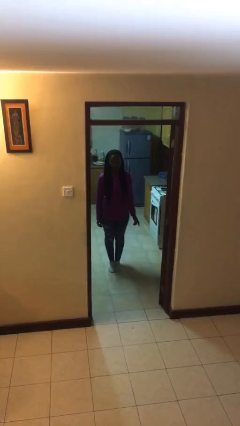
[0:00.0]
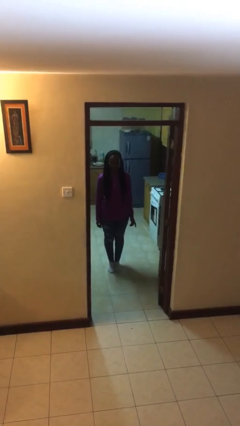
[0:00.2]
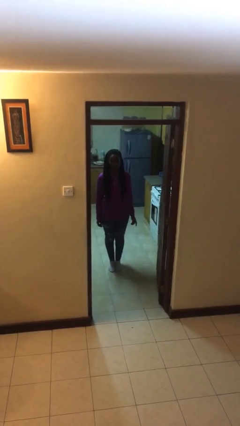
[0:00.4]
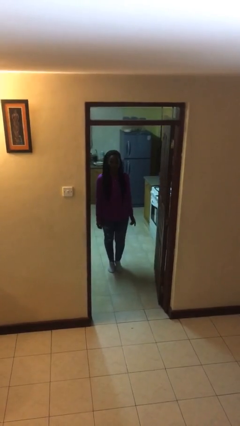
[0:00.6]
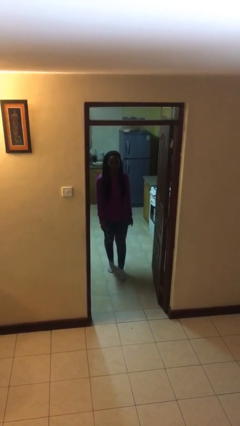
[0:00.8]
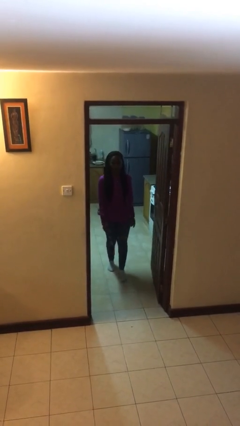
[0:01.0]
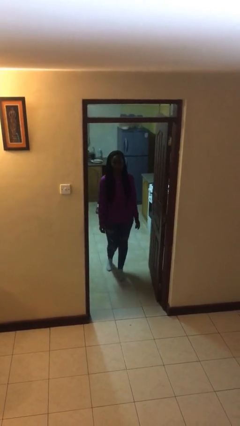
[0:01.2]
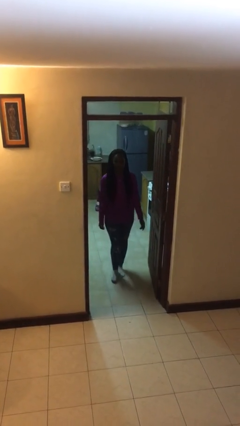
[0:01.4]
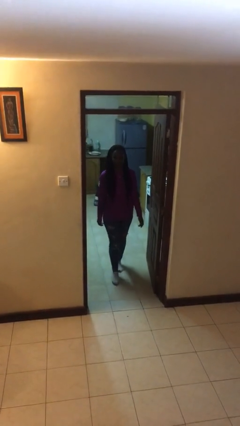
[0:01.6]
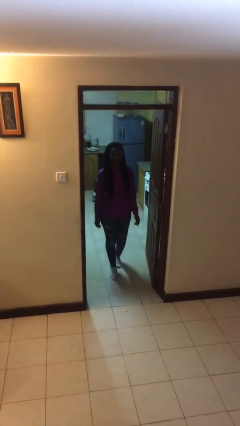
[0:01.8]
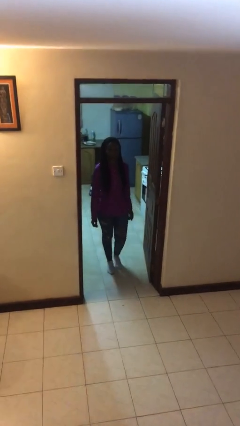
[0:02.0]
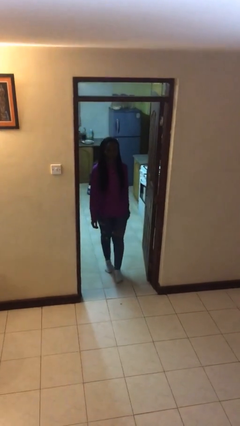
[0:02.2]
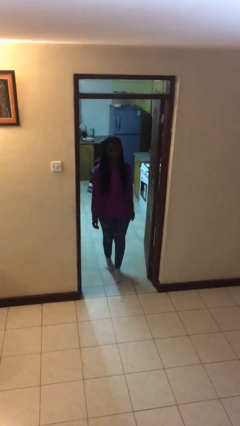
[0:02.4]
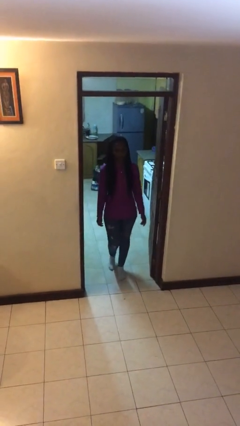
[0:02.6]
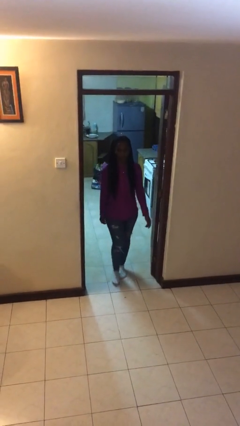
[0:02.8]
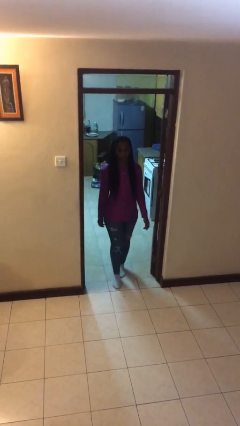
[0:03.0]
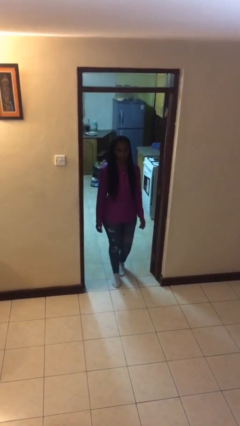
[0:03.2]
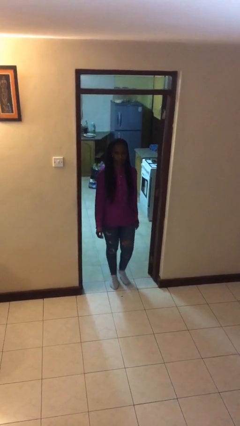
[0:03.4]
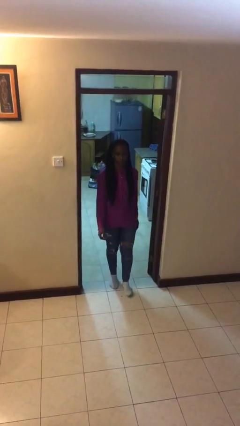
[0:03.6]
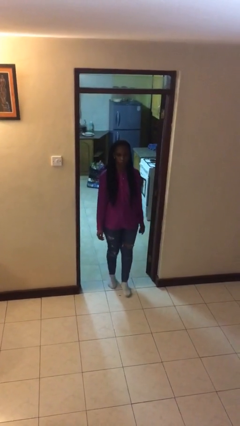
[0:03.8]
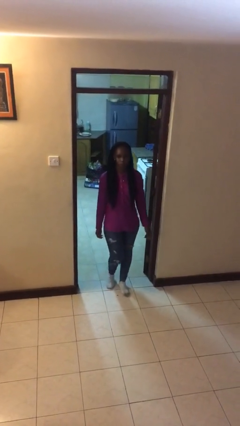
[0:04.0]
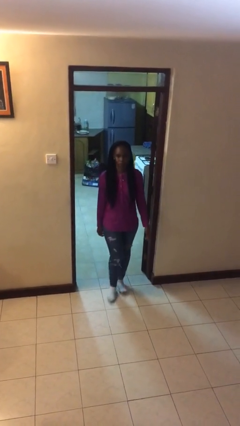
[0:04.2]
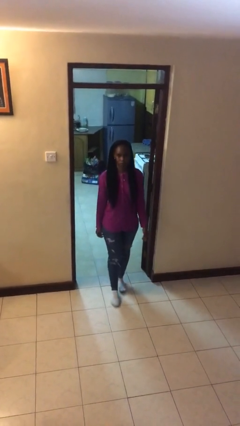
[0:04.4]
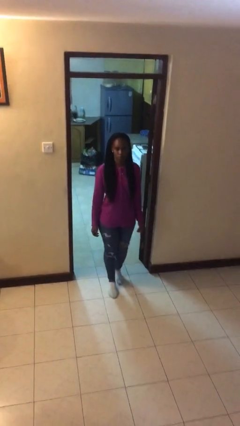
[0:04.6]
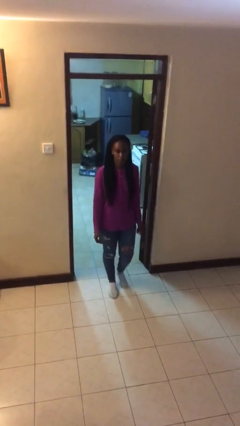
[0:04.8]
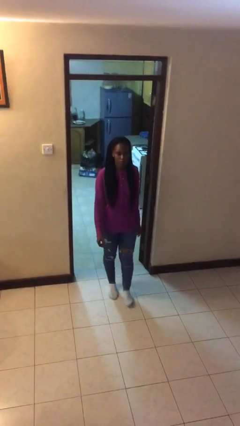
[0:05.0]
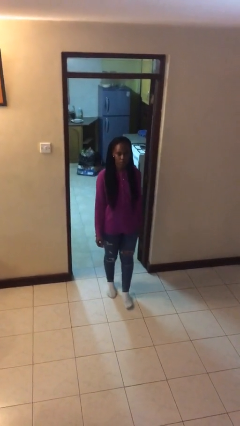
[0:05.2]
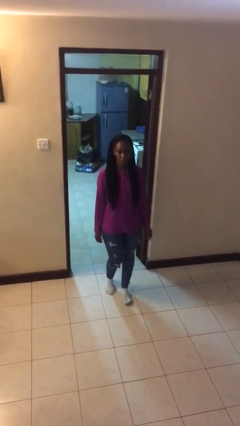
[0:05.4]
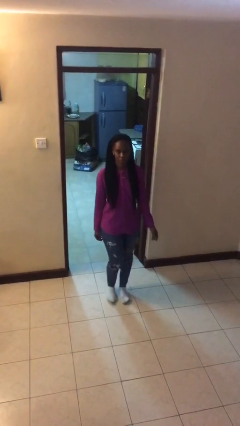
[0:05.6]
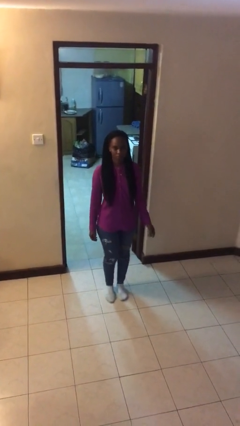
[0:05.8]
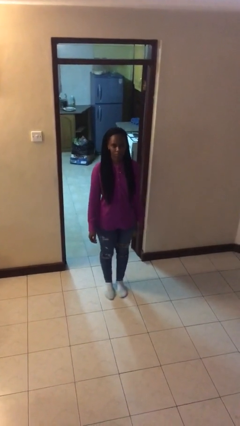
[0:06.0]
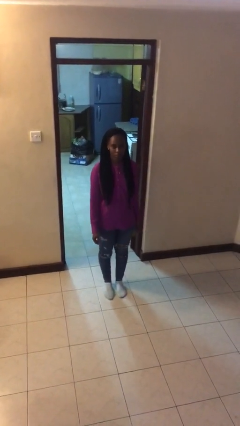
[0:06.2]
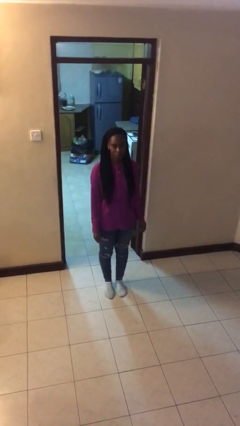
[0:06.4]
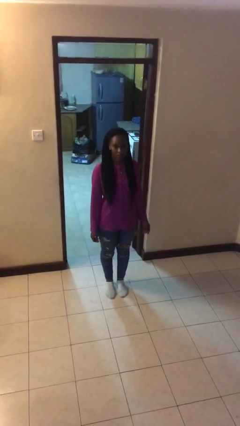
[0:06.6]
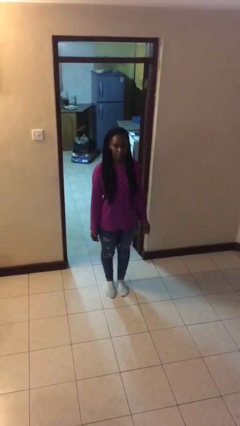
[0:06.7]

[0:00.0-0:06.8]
person enters scene through structure

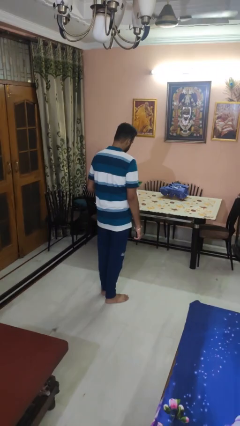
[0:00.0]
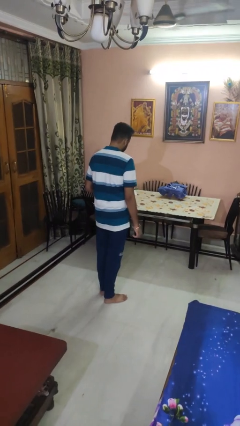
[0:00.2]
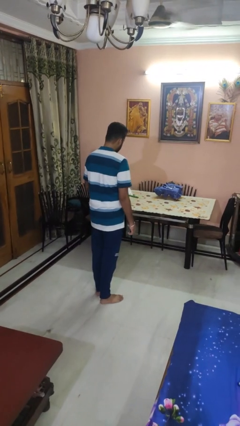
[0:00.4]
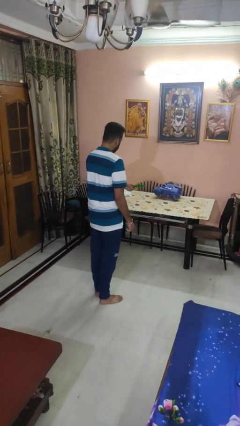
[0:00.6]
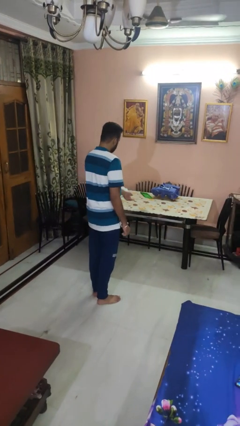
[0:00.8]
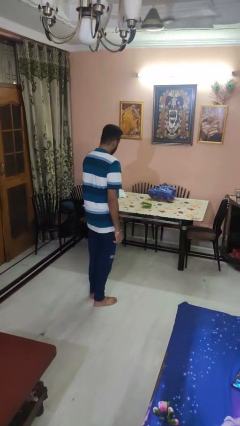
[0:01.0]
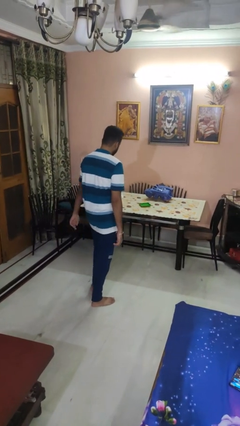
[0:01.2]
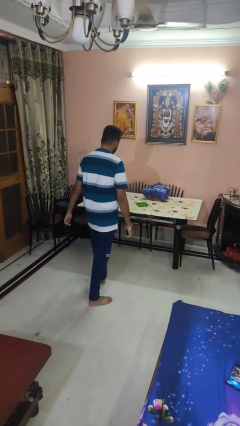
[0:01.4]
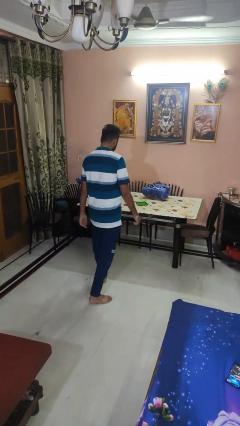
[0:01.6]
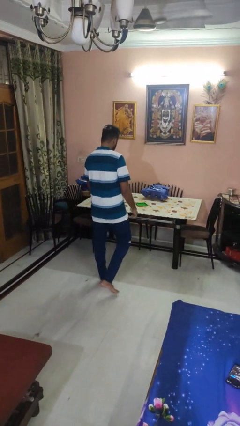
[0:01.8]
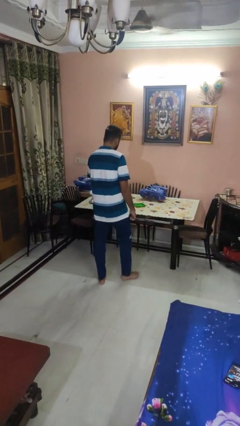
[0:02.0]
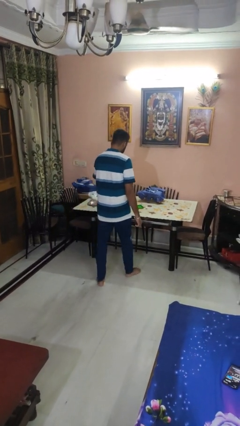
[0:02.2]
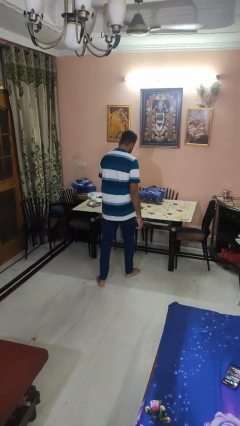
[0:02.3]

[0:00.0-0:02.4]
person throws object on table

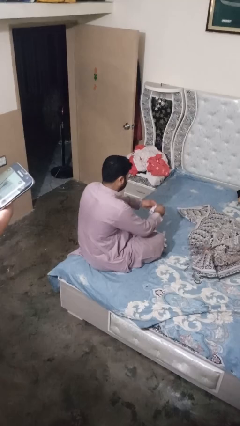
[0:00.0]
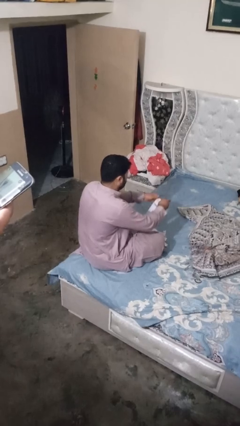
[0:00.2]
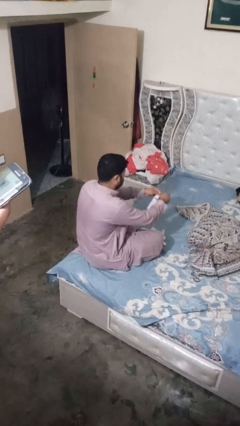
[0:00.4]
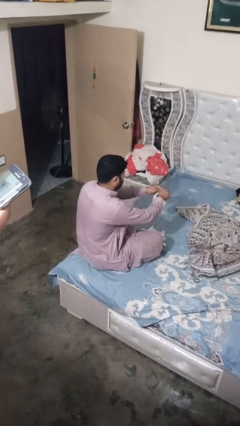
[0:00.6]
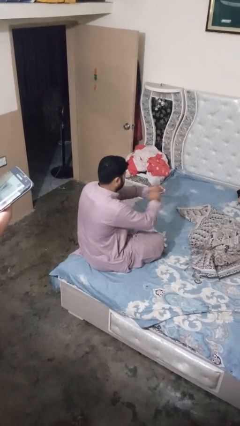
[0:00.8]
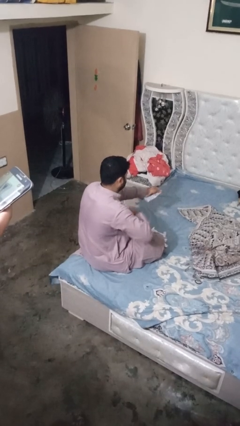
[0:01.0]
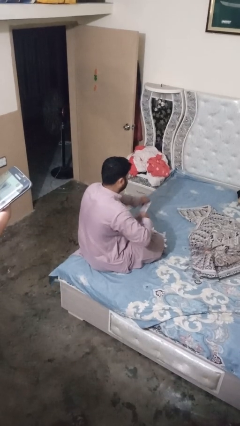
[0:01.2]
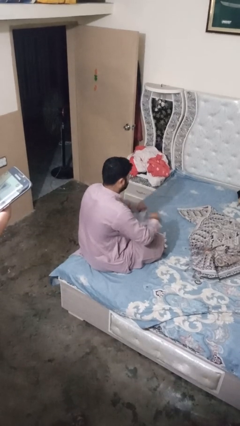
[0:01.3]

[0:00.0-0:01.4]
person tears paper

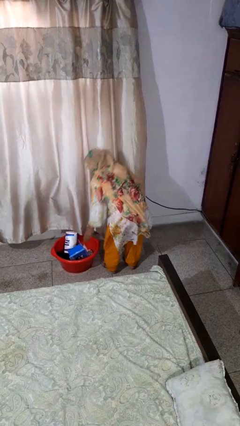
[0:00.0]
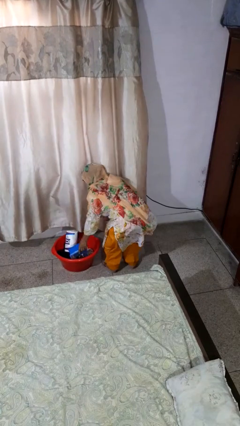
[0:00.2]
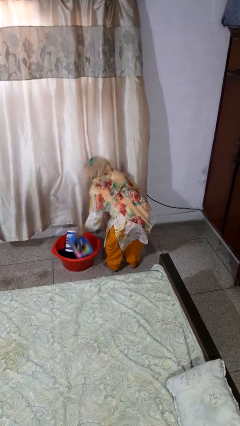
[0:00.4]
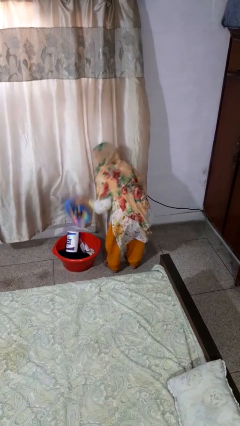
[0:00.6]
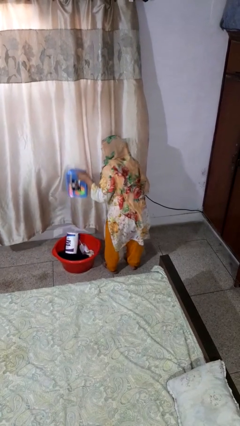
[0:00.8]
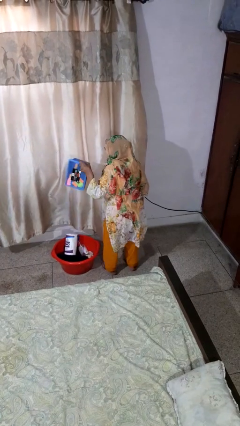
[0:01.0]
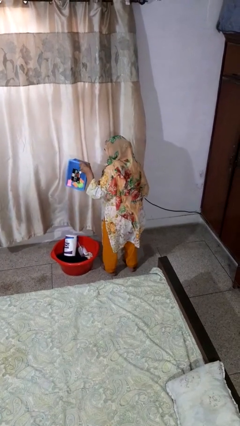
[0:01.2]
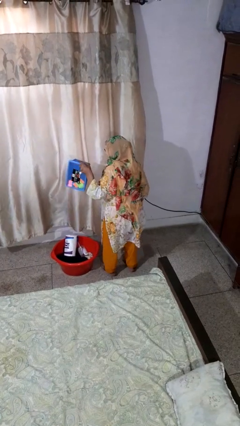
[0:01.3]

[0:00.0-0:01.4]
person takes object from basket

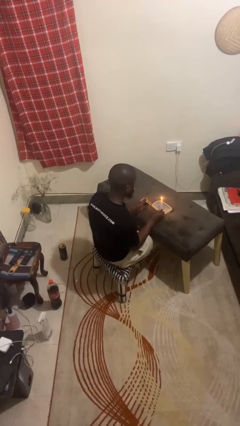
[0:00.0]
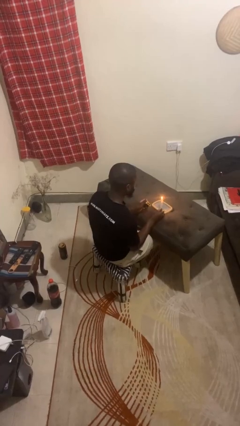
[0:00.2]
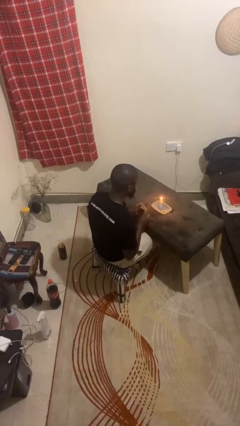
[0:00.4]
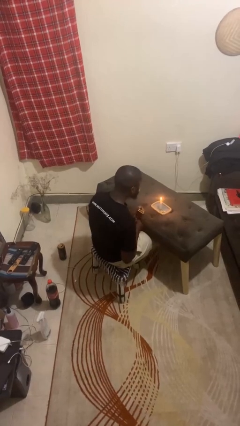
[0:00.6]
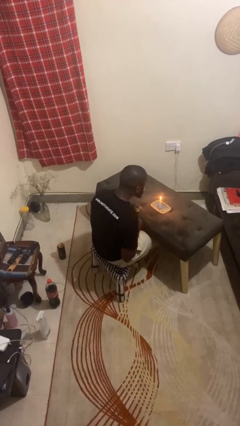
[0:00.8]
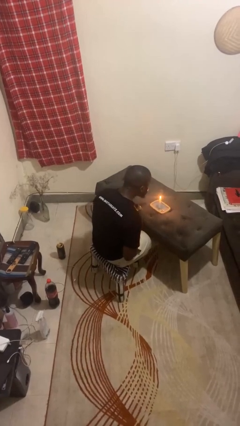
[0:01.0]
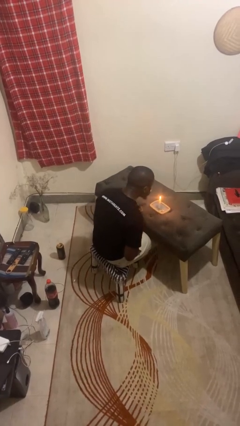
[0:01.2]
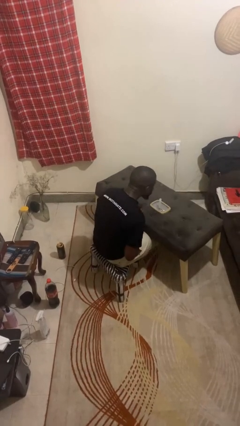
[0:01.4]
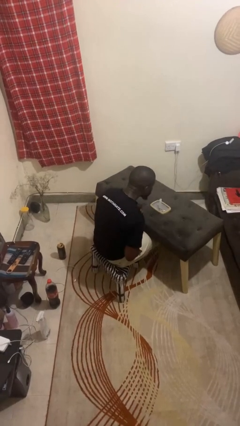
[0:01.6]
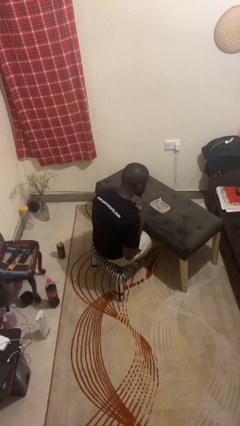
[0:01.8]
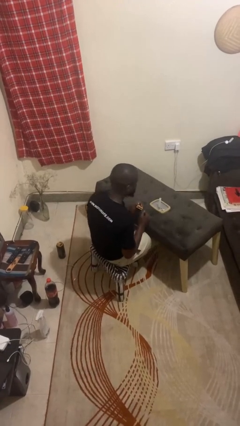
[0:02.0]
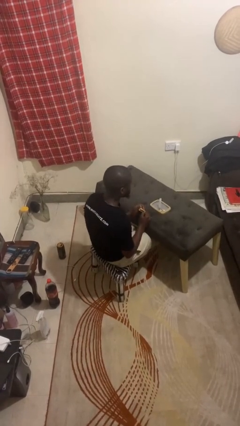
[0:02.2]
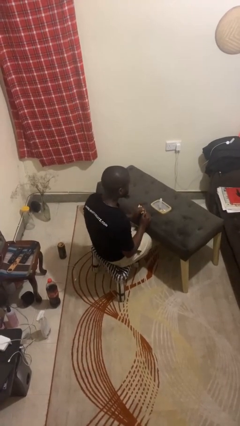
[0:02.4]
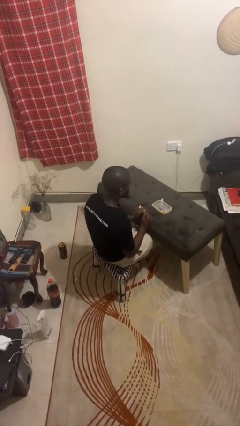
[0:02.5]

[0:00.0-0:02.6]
person extinguishes candle

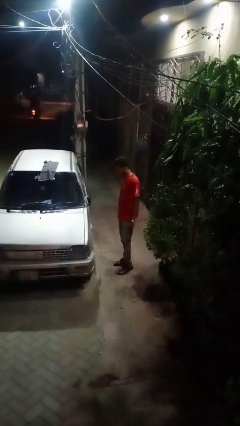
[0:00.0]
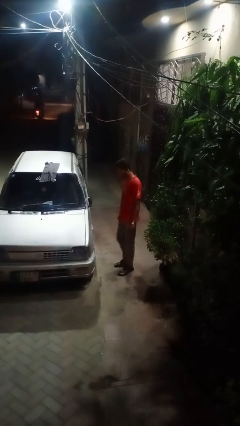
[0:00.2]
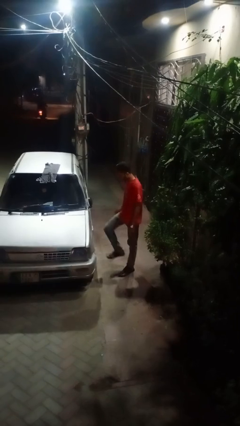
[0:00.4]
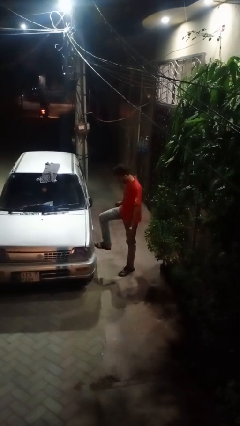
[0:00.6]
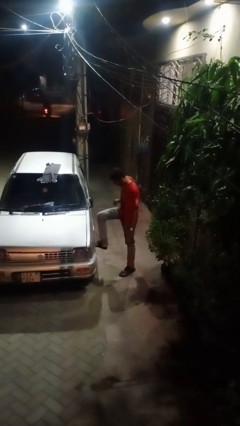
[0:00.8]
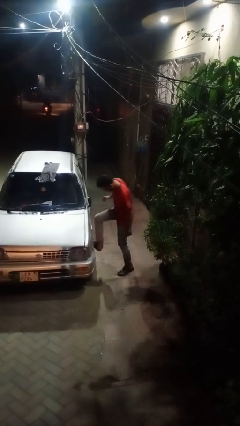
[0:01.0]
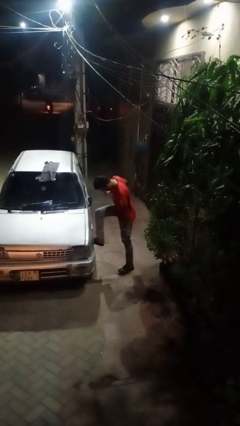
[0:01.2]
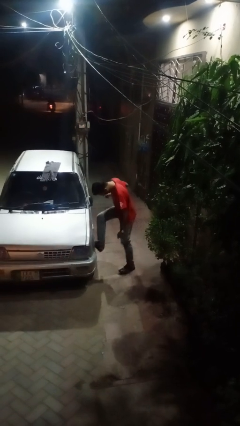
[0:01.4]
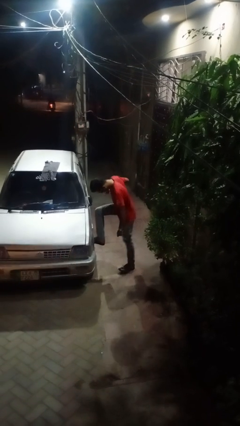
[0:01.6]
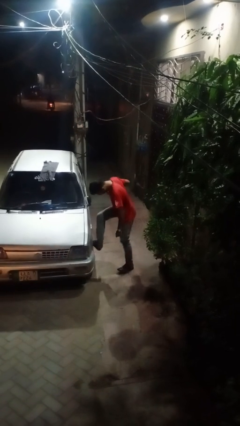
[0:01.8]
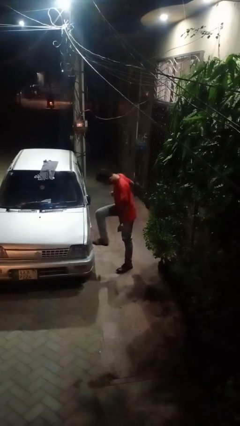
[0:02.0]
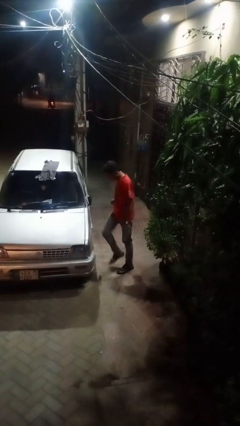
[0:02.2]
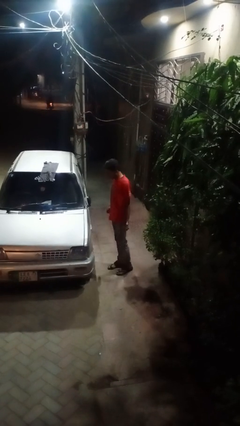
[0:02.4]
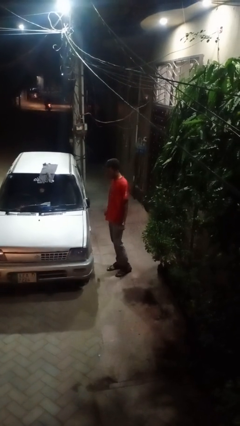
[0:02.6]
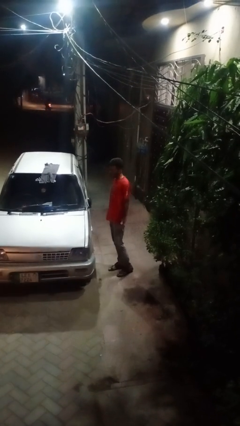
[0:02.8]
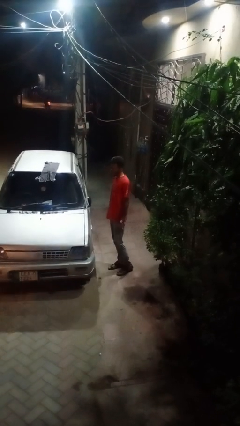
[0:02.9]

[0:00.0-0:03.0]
person kicks car tires
